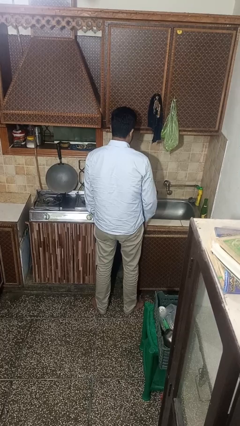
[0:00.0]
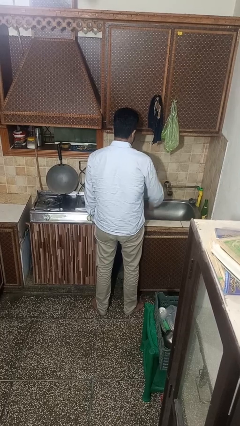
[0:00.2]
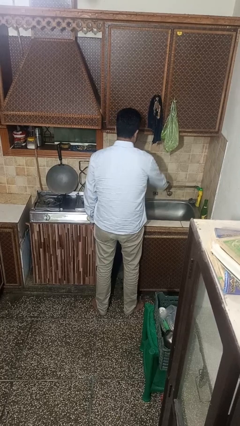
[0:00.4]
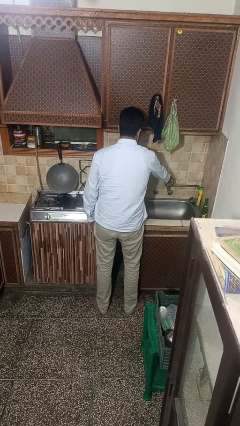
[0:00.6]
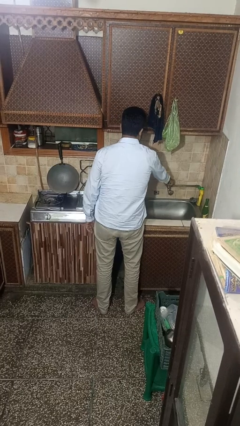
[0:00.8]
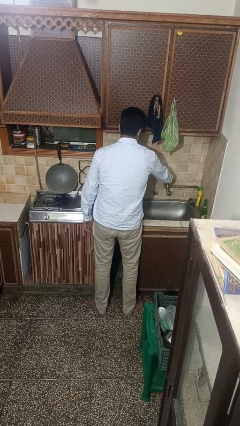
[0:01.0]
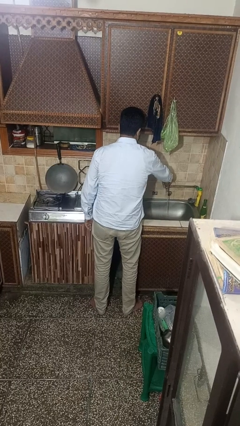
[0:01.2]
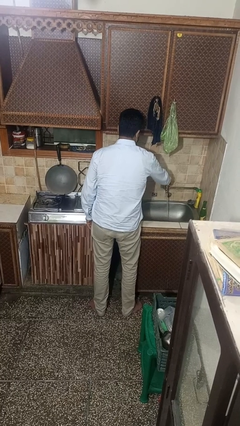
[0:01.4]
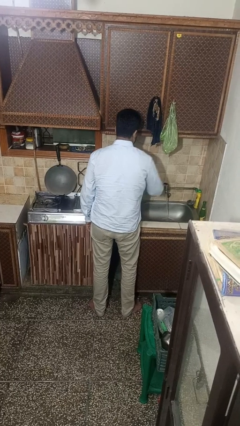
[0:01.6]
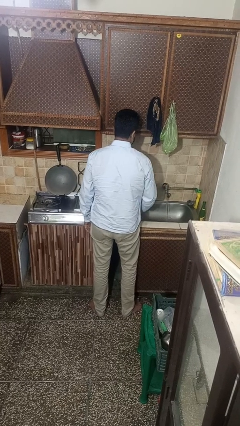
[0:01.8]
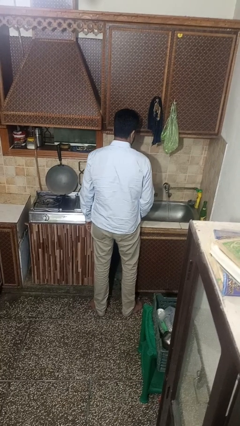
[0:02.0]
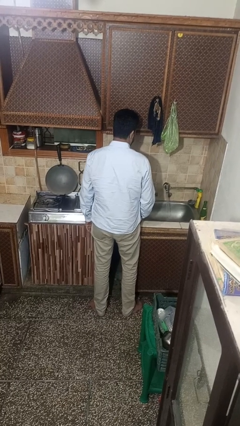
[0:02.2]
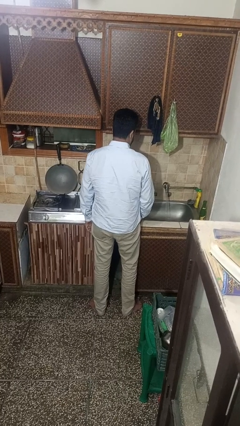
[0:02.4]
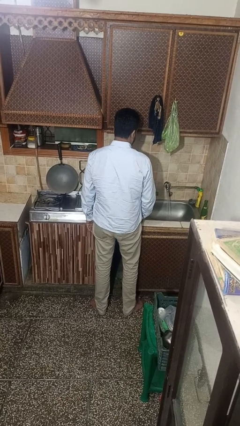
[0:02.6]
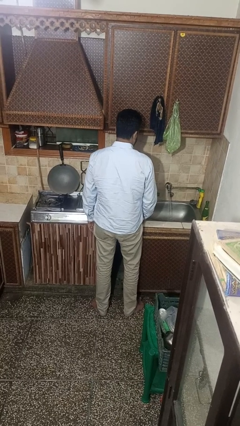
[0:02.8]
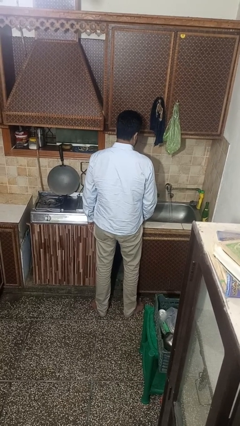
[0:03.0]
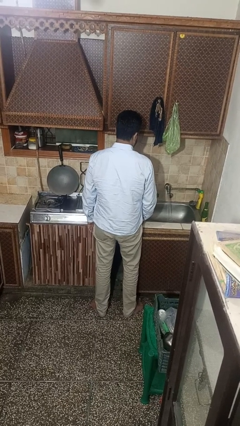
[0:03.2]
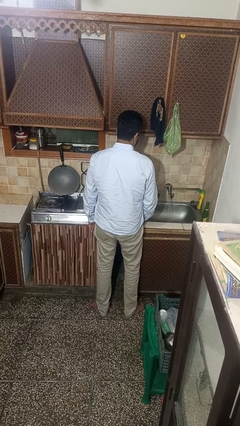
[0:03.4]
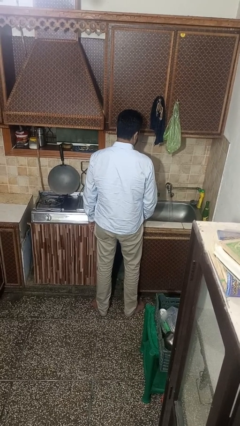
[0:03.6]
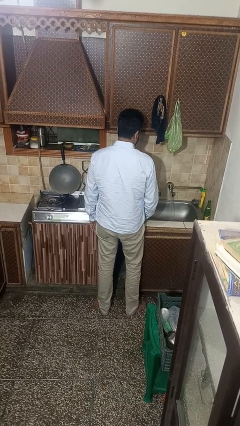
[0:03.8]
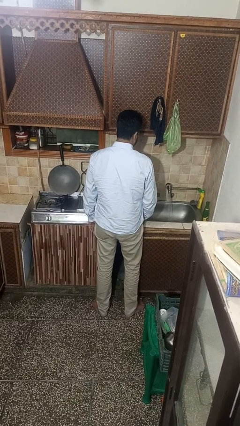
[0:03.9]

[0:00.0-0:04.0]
person turns on faucet

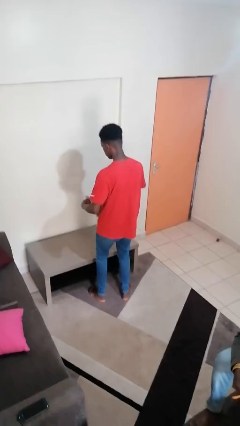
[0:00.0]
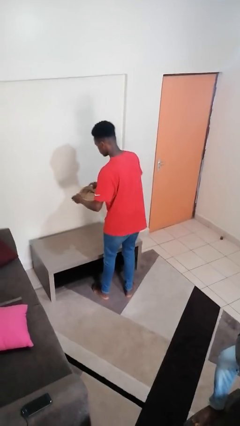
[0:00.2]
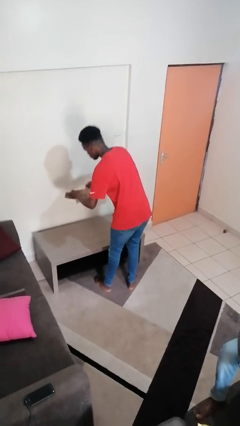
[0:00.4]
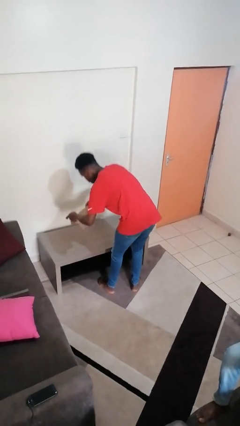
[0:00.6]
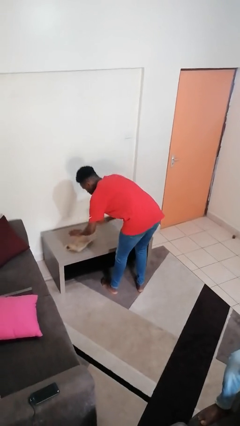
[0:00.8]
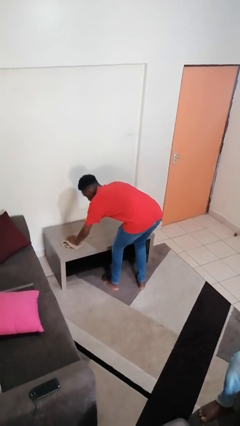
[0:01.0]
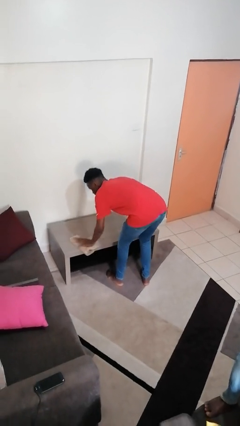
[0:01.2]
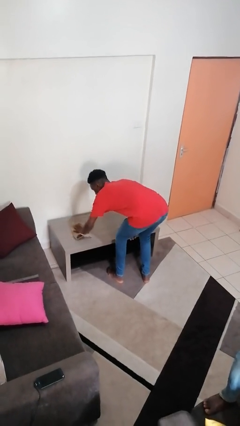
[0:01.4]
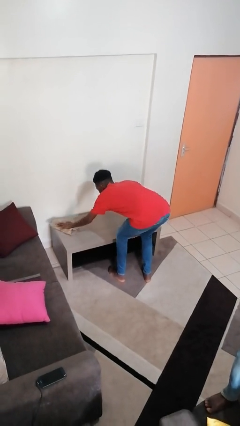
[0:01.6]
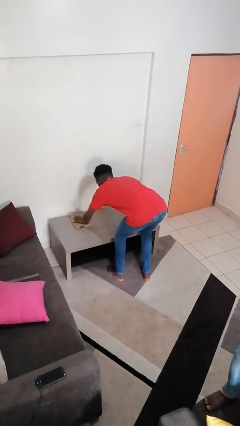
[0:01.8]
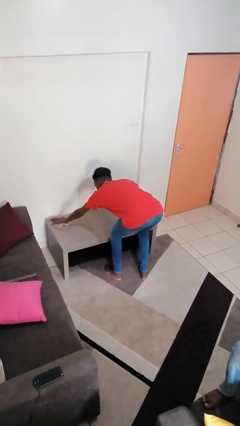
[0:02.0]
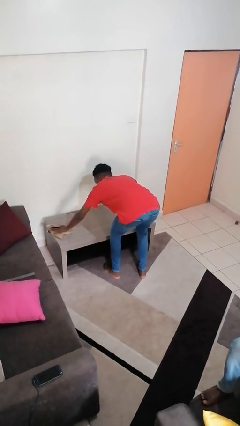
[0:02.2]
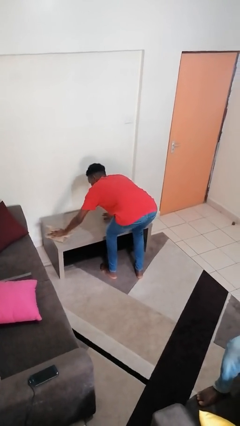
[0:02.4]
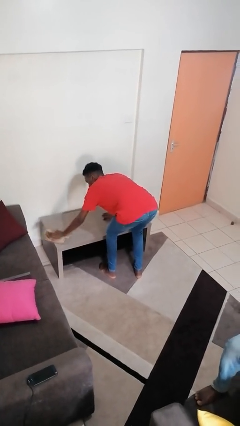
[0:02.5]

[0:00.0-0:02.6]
person cleans table with rag

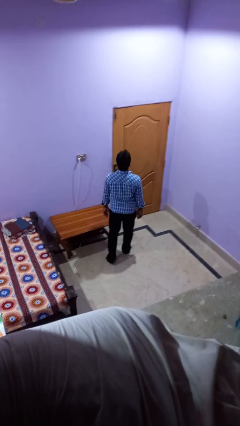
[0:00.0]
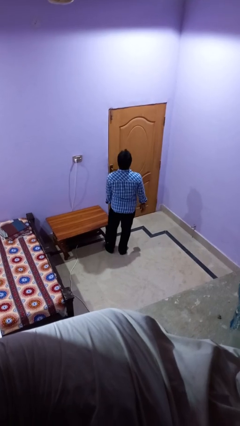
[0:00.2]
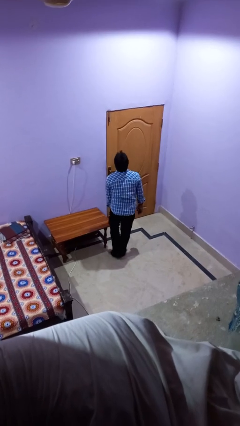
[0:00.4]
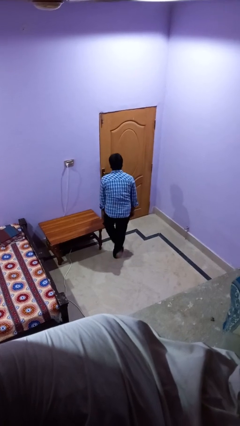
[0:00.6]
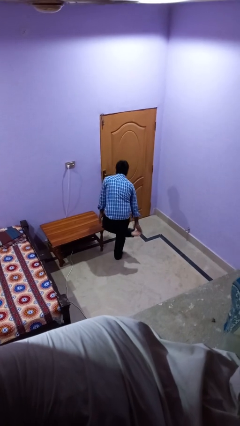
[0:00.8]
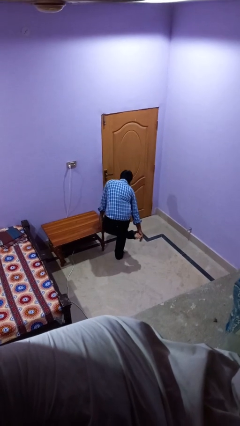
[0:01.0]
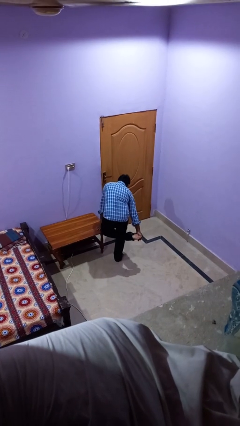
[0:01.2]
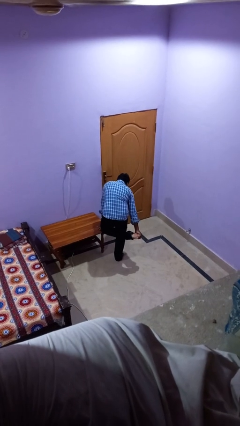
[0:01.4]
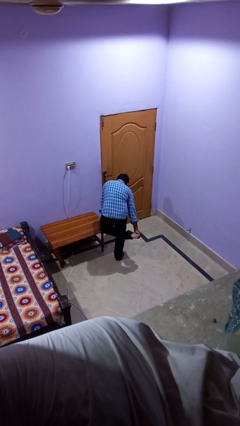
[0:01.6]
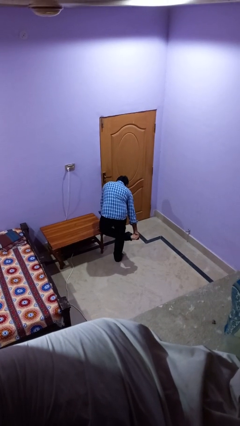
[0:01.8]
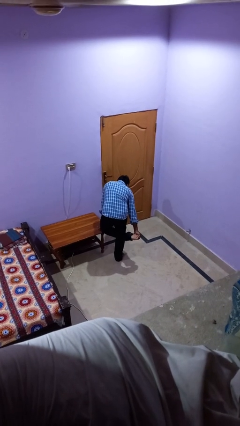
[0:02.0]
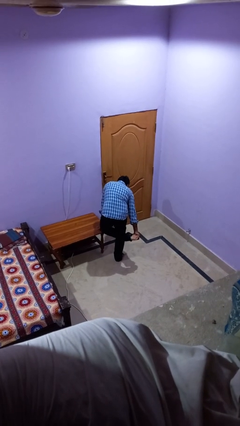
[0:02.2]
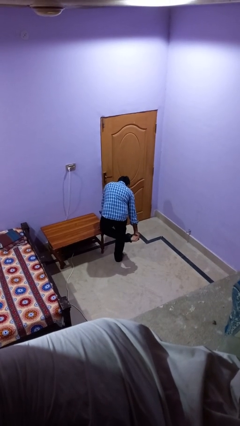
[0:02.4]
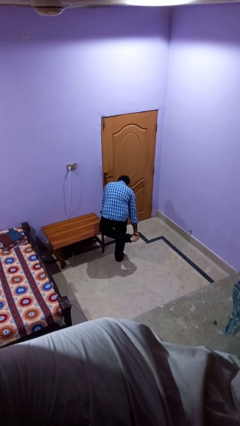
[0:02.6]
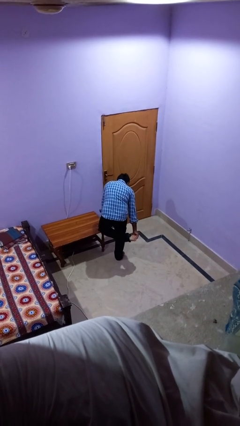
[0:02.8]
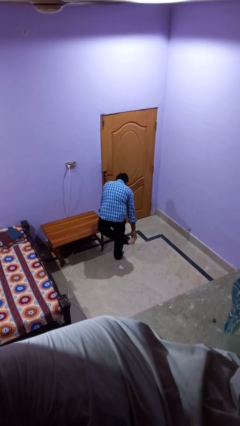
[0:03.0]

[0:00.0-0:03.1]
person stubs toe

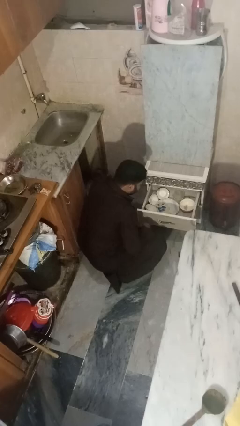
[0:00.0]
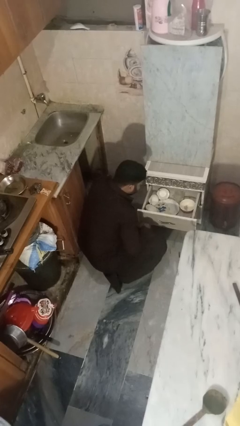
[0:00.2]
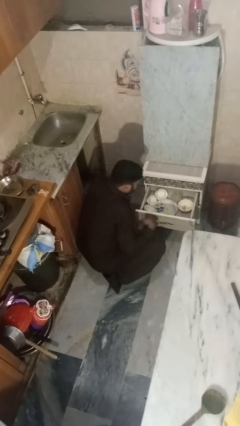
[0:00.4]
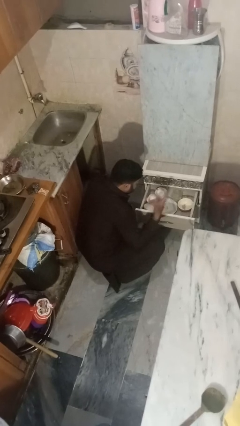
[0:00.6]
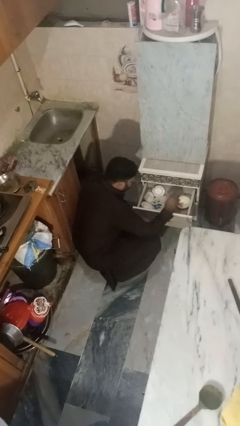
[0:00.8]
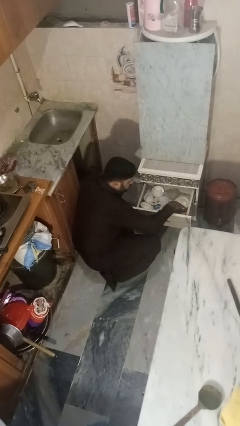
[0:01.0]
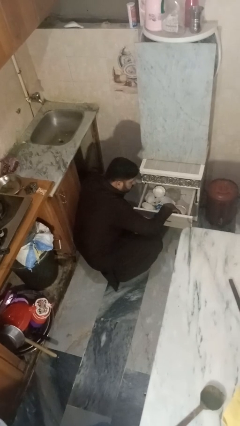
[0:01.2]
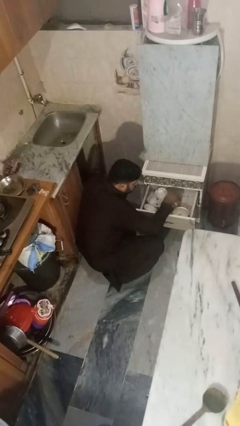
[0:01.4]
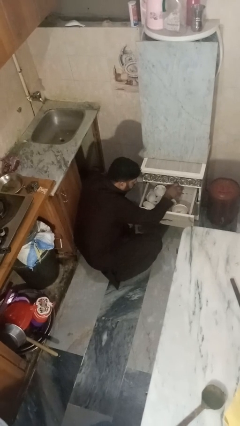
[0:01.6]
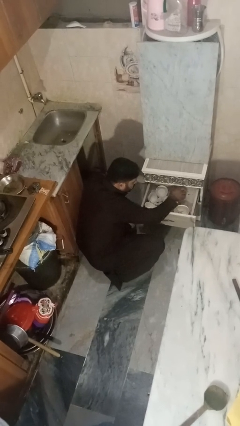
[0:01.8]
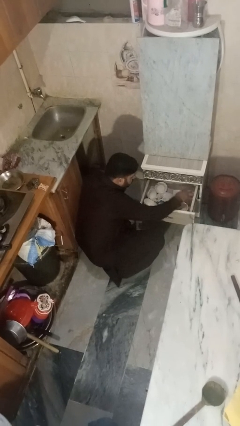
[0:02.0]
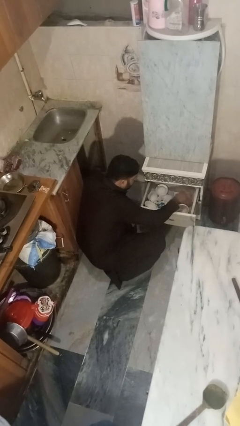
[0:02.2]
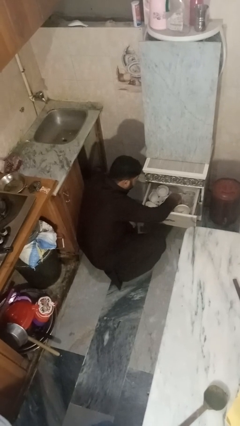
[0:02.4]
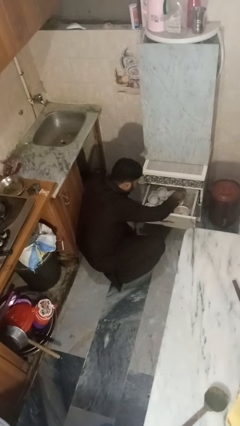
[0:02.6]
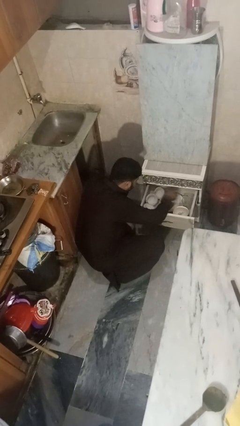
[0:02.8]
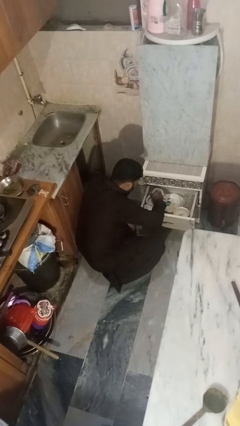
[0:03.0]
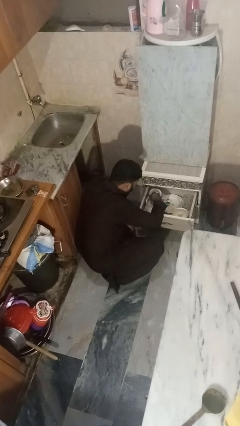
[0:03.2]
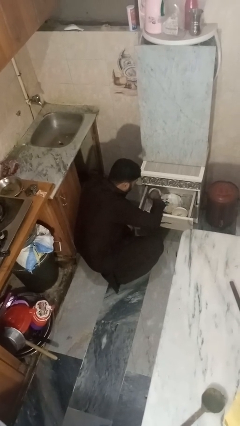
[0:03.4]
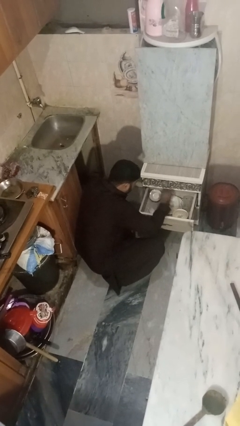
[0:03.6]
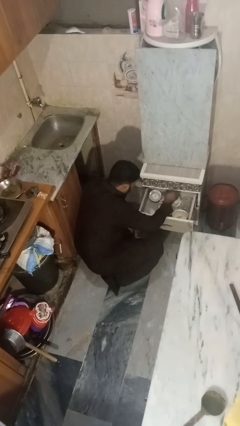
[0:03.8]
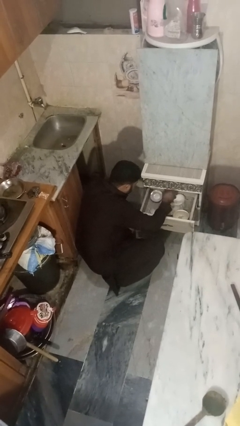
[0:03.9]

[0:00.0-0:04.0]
person searches in kitchen drawer

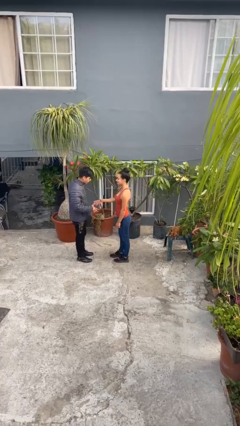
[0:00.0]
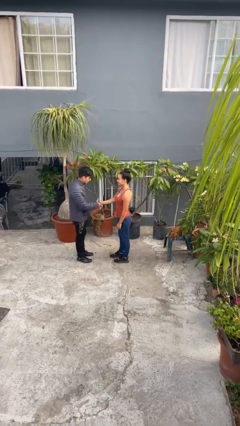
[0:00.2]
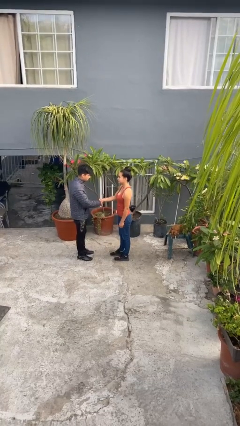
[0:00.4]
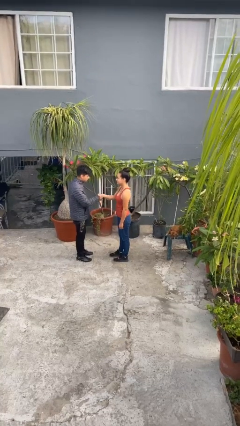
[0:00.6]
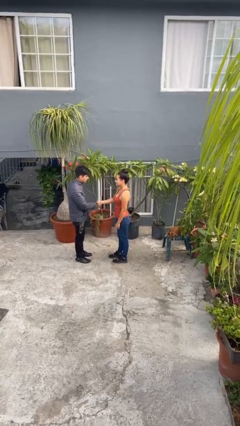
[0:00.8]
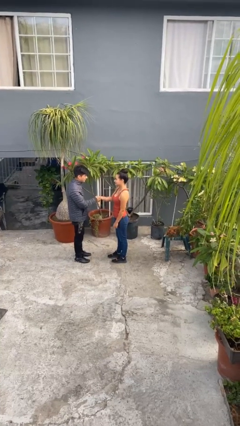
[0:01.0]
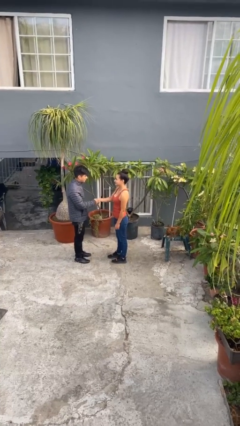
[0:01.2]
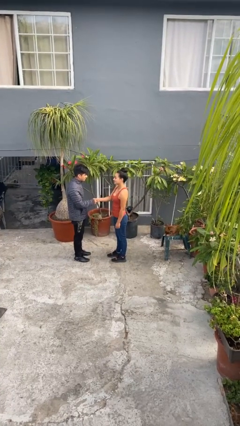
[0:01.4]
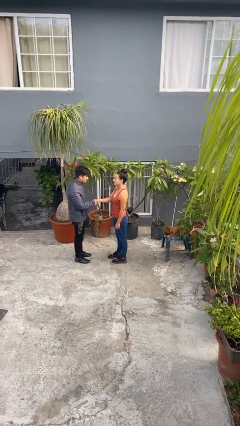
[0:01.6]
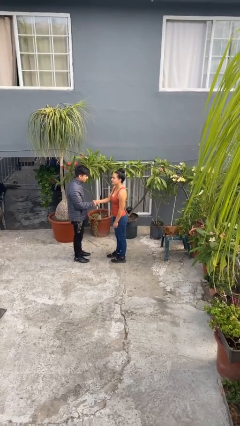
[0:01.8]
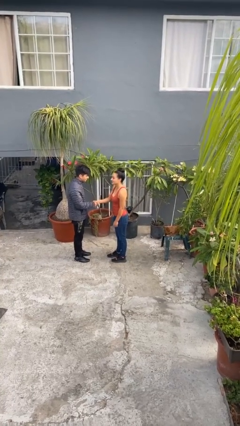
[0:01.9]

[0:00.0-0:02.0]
person shakes hand

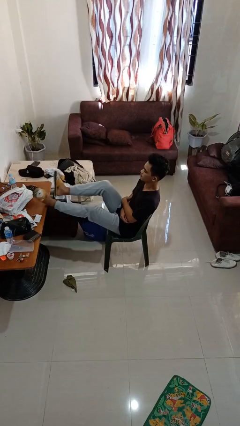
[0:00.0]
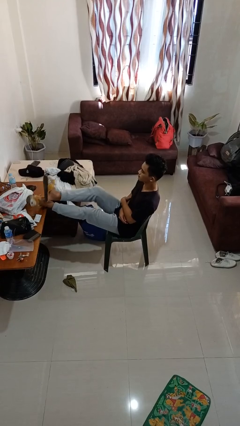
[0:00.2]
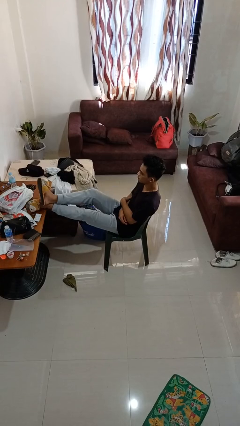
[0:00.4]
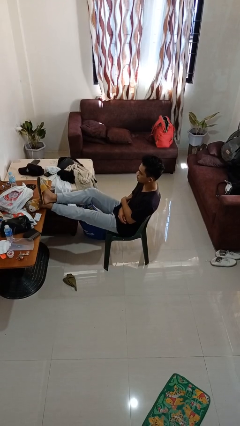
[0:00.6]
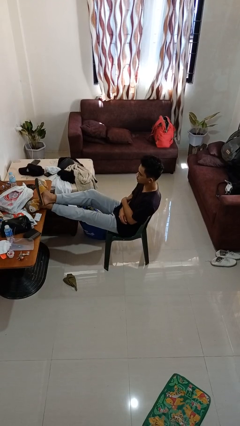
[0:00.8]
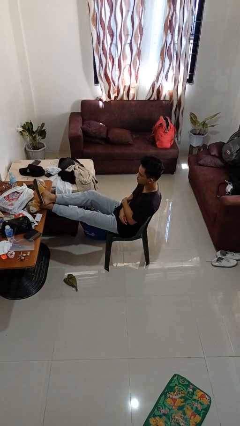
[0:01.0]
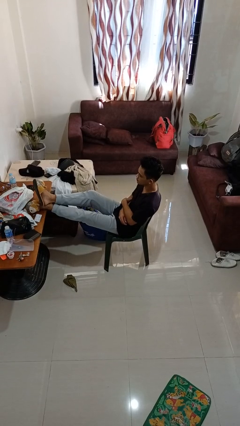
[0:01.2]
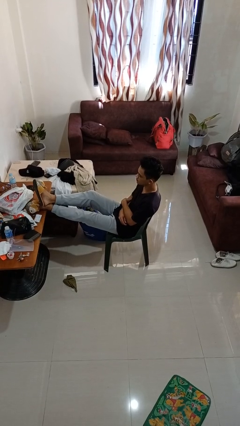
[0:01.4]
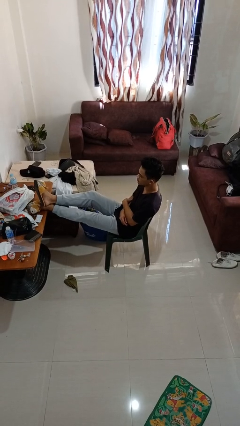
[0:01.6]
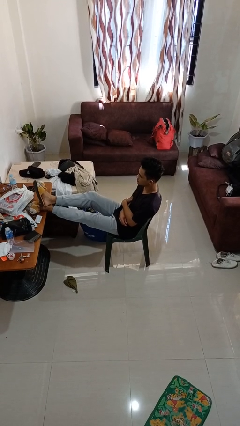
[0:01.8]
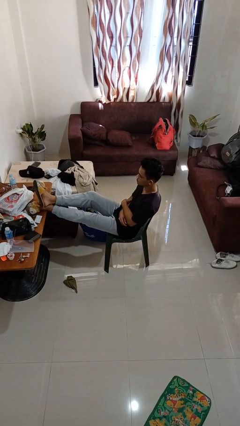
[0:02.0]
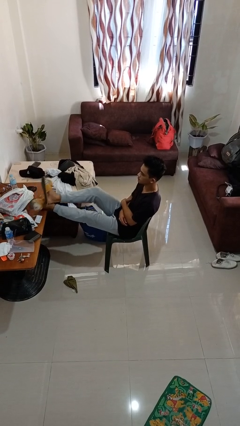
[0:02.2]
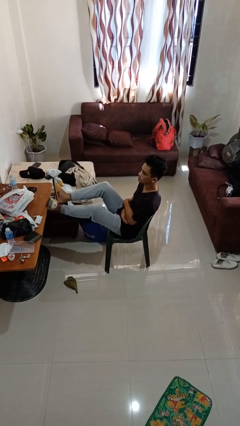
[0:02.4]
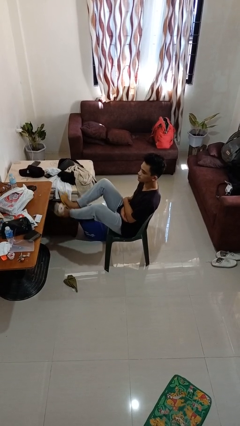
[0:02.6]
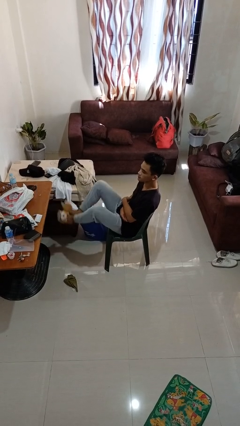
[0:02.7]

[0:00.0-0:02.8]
person puts feet up
